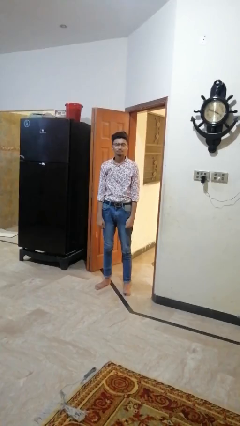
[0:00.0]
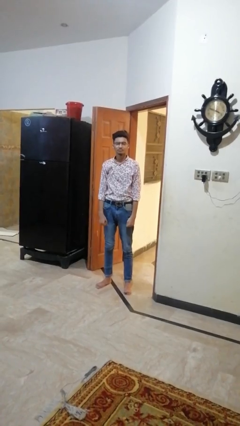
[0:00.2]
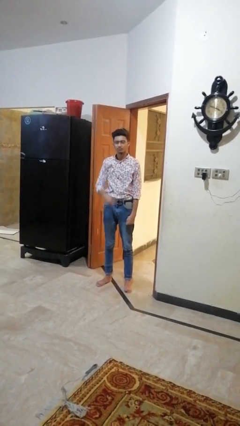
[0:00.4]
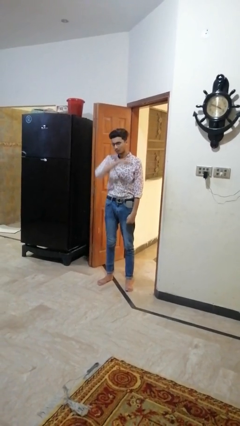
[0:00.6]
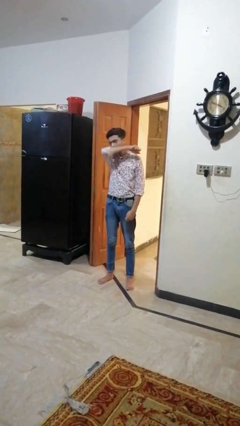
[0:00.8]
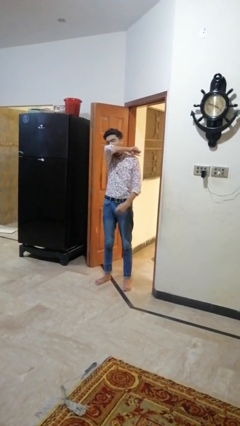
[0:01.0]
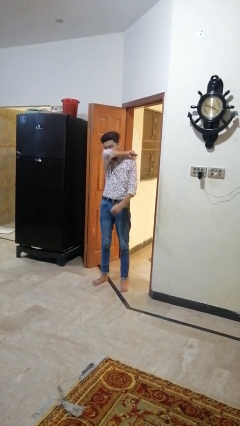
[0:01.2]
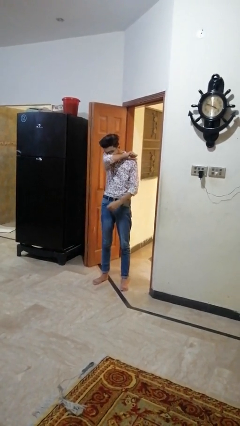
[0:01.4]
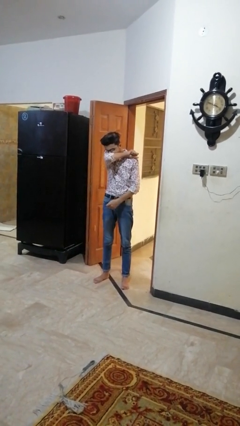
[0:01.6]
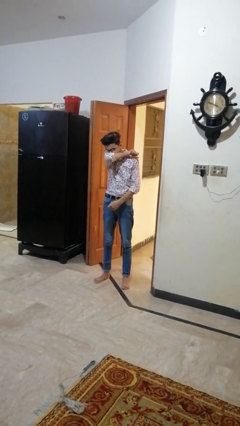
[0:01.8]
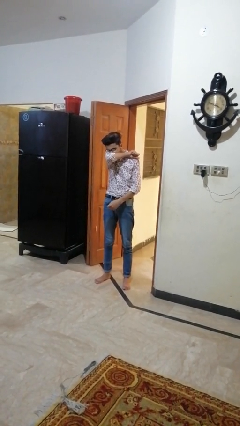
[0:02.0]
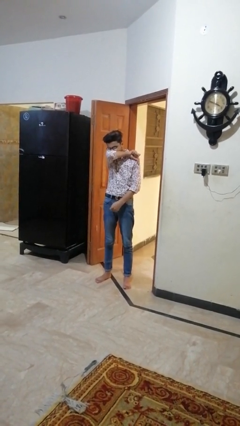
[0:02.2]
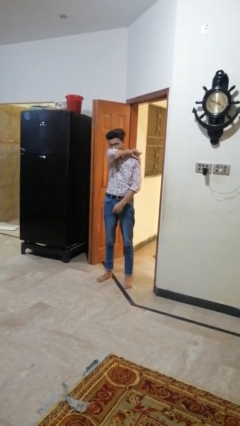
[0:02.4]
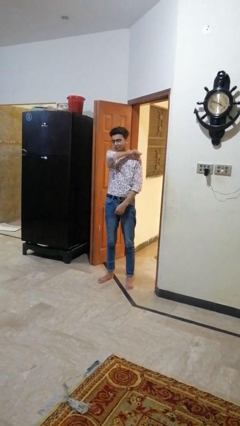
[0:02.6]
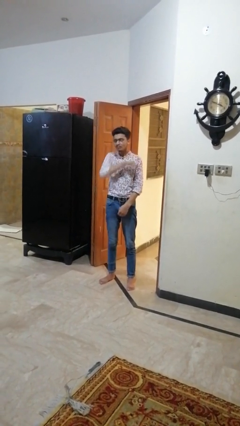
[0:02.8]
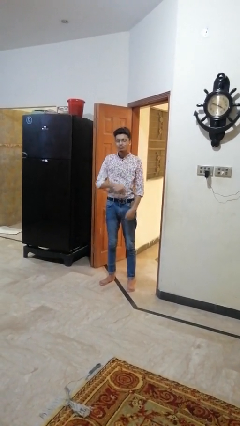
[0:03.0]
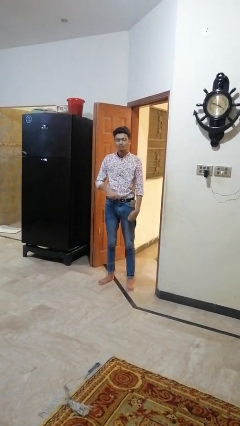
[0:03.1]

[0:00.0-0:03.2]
person sneezes into arm

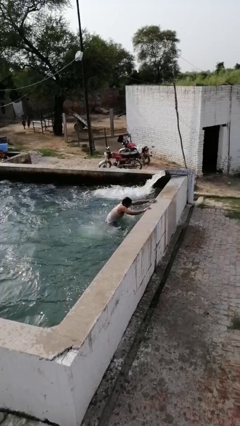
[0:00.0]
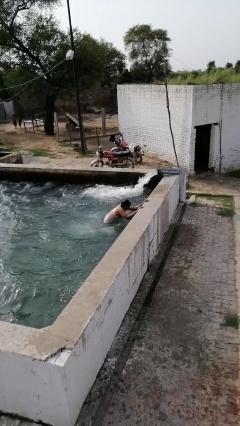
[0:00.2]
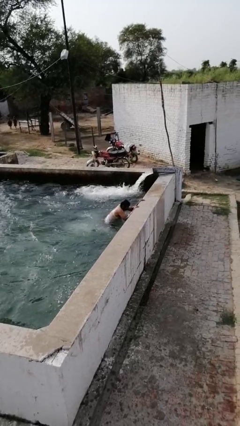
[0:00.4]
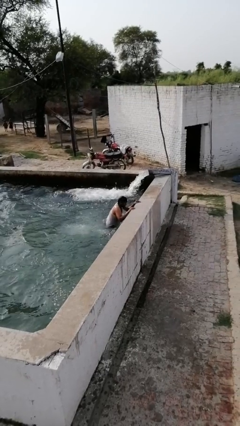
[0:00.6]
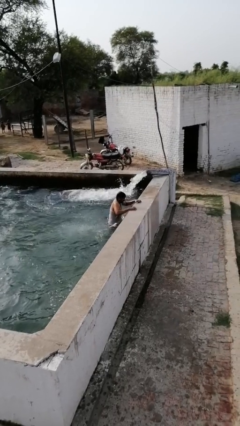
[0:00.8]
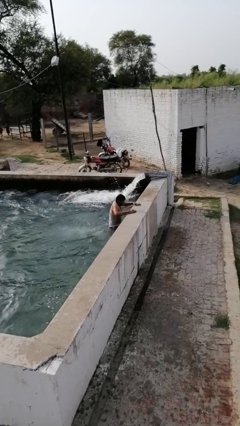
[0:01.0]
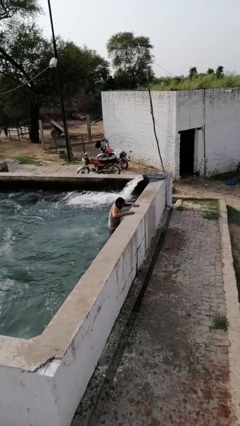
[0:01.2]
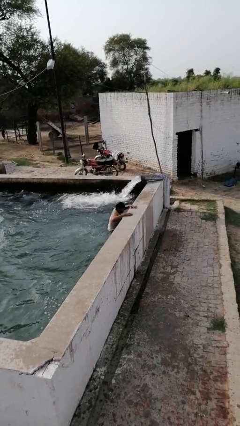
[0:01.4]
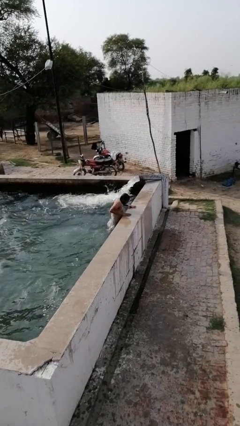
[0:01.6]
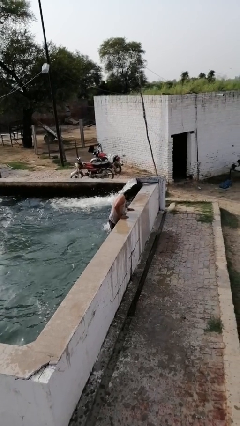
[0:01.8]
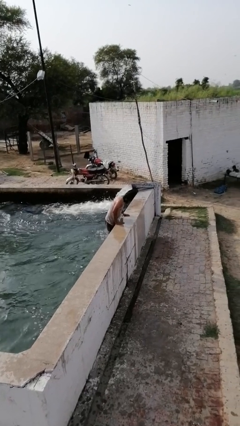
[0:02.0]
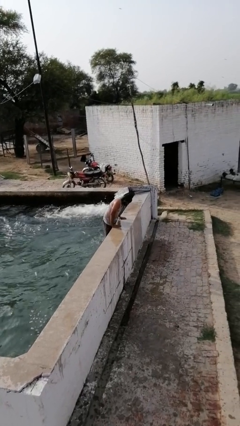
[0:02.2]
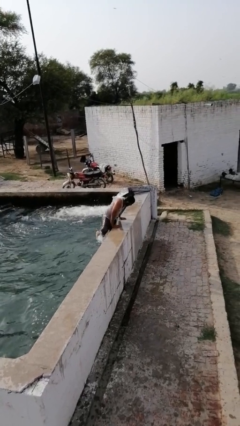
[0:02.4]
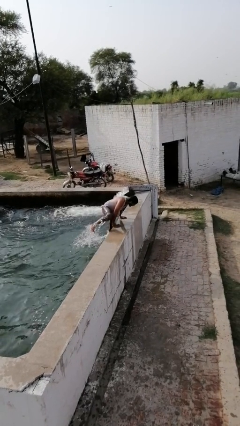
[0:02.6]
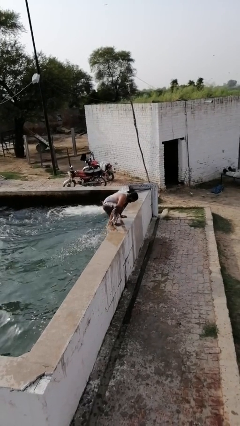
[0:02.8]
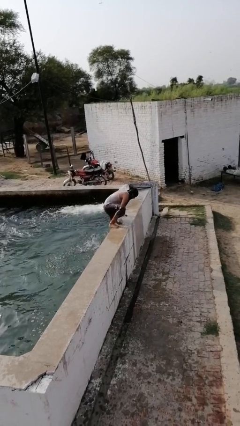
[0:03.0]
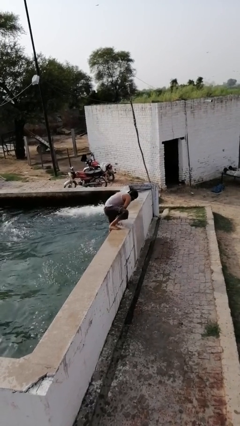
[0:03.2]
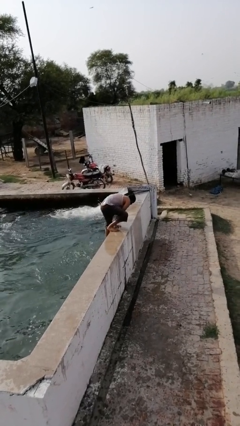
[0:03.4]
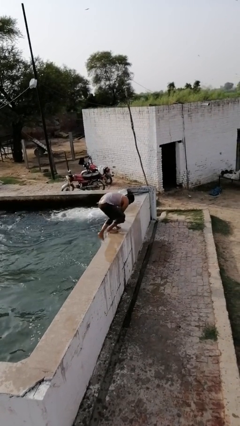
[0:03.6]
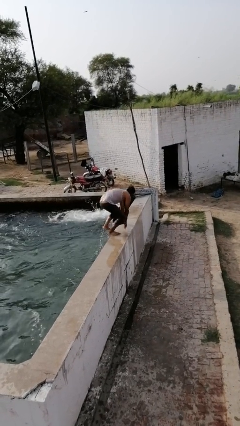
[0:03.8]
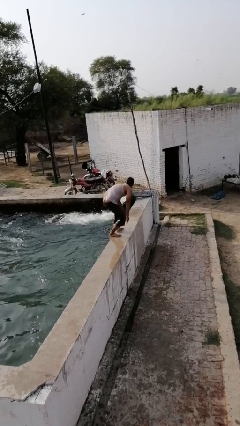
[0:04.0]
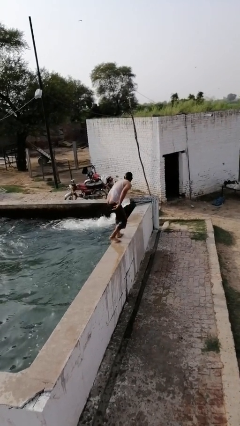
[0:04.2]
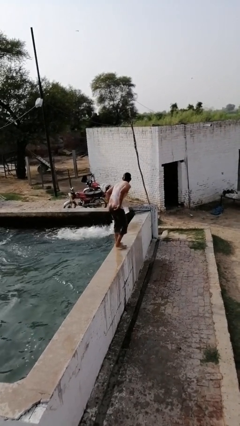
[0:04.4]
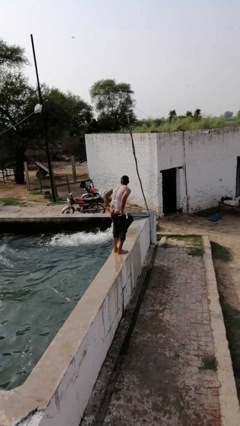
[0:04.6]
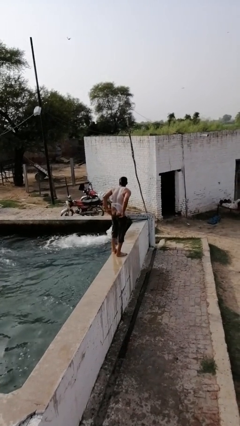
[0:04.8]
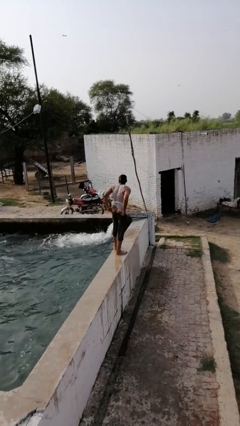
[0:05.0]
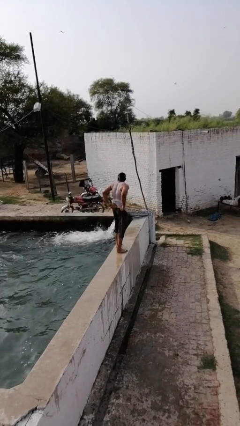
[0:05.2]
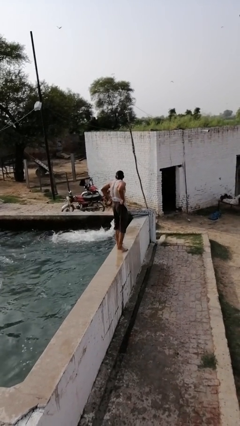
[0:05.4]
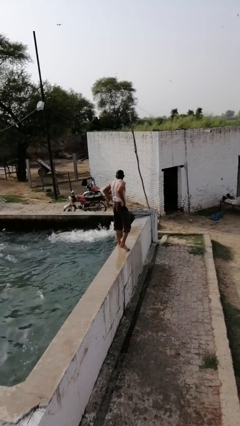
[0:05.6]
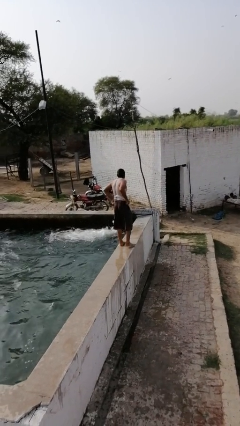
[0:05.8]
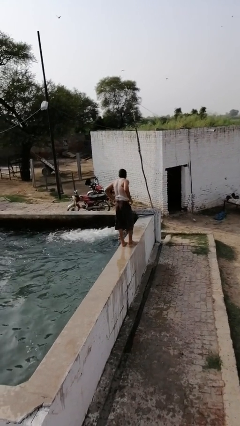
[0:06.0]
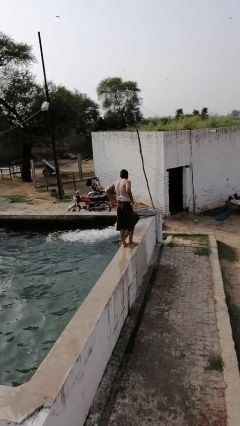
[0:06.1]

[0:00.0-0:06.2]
person exits pool

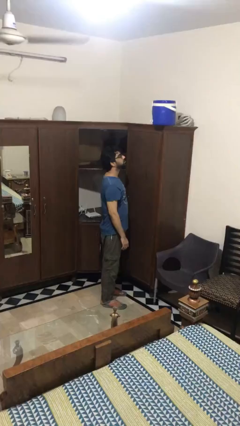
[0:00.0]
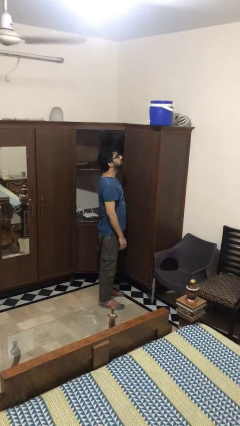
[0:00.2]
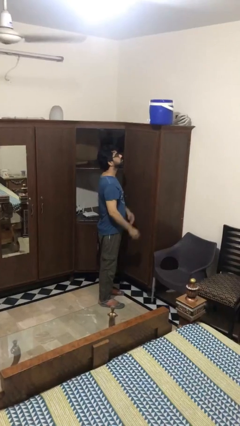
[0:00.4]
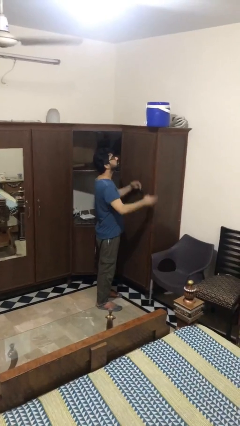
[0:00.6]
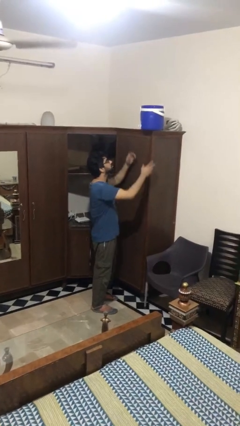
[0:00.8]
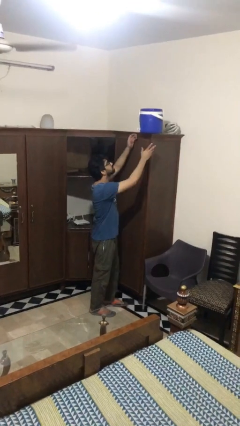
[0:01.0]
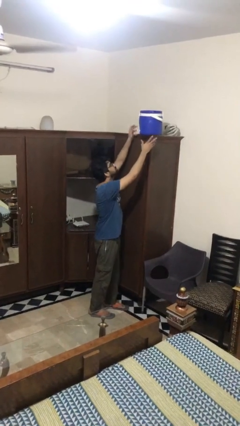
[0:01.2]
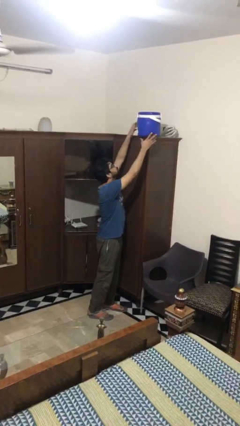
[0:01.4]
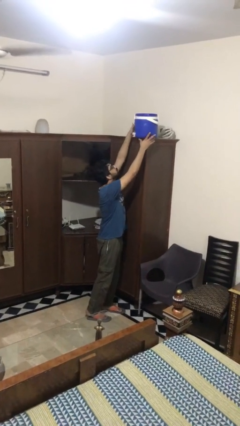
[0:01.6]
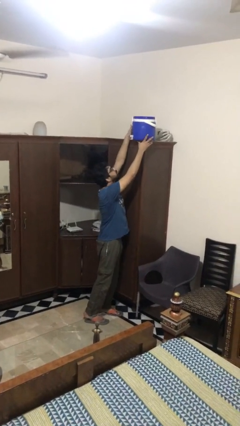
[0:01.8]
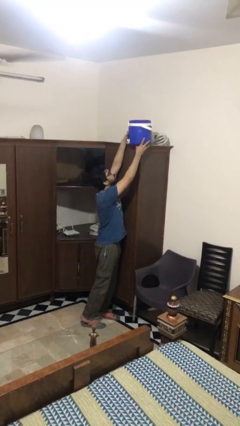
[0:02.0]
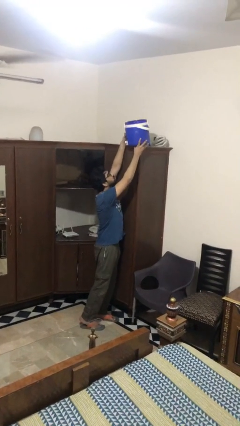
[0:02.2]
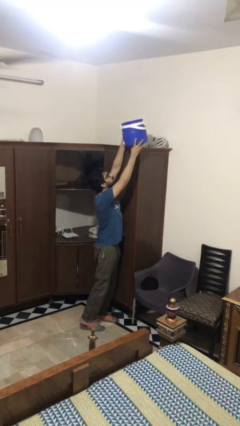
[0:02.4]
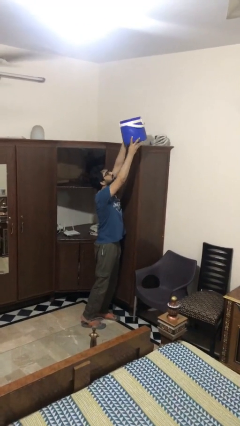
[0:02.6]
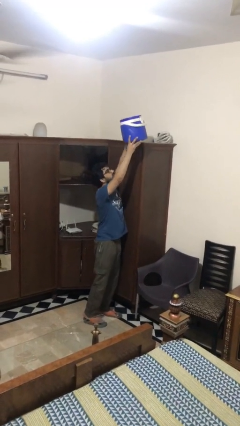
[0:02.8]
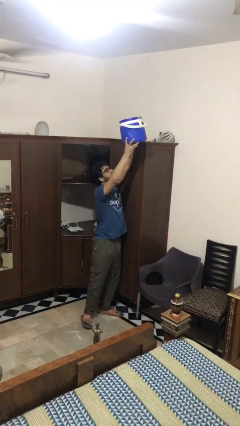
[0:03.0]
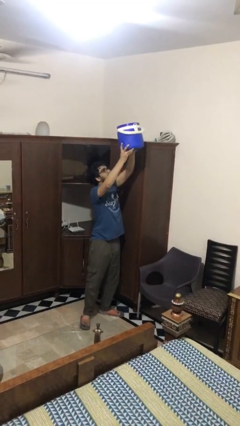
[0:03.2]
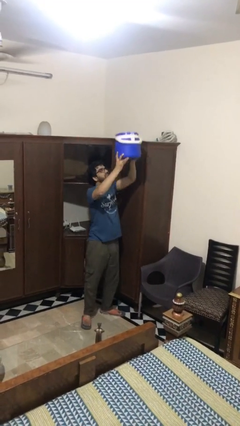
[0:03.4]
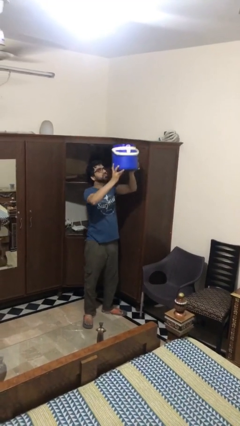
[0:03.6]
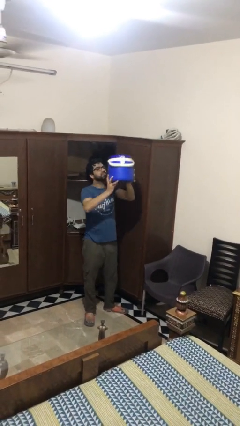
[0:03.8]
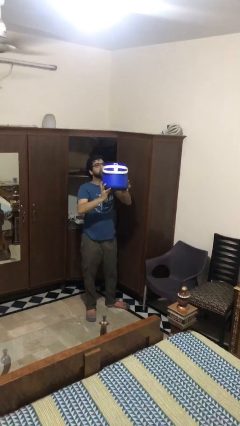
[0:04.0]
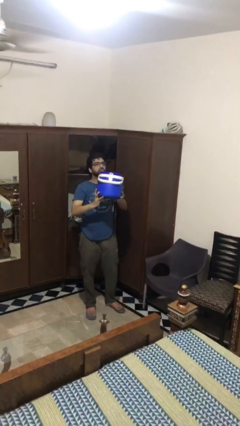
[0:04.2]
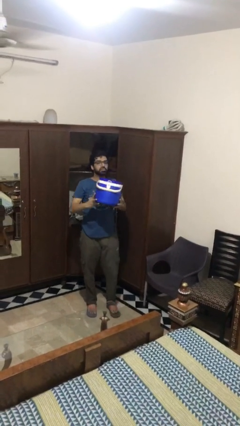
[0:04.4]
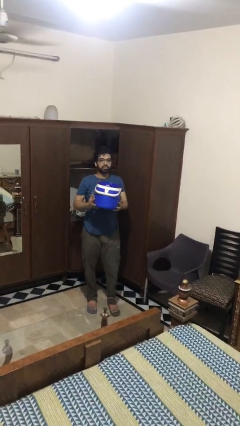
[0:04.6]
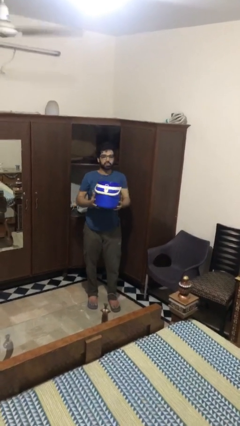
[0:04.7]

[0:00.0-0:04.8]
person picks up object from shelf

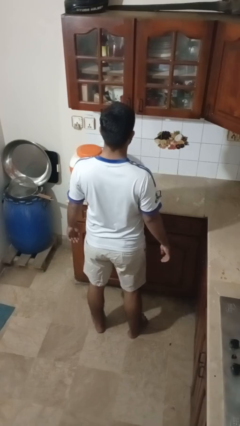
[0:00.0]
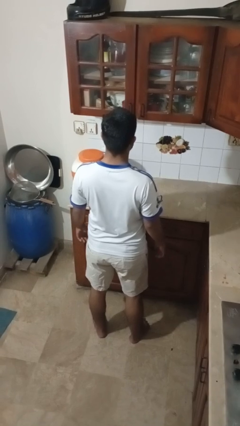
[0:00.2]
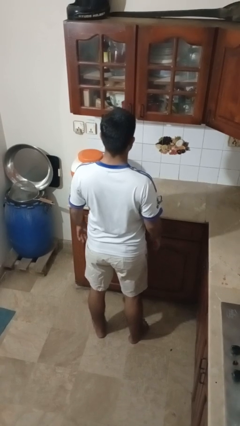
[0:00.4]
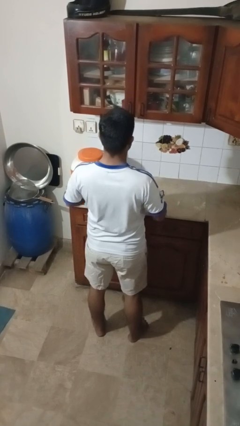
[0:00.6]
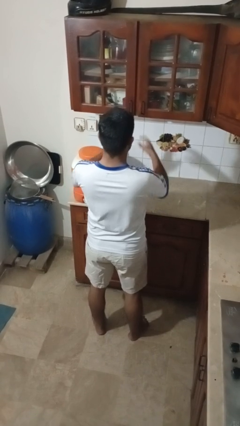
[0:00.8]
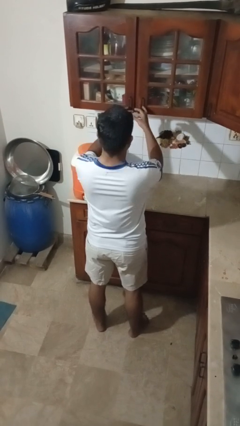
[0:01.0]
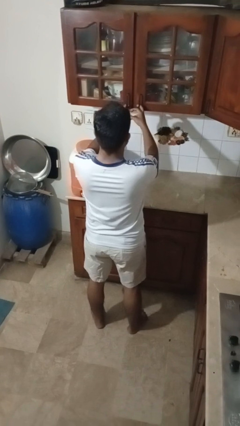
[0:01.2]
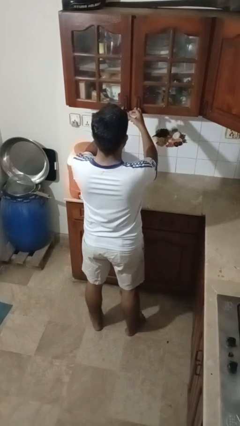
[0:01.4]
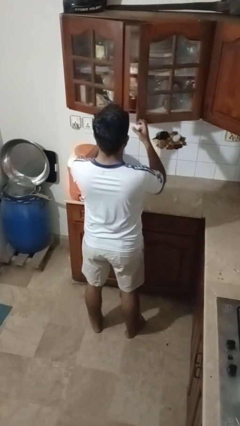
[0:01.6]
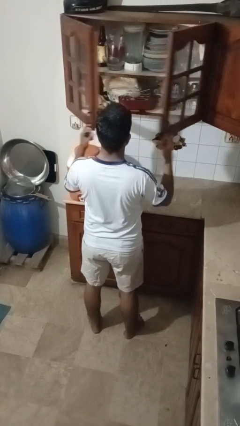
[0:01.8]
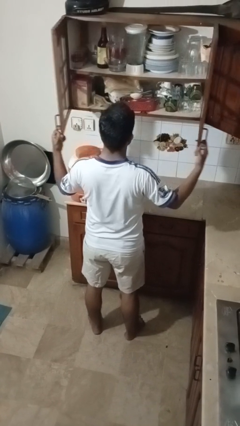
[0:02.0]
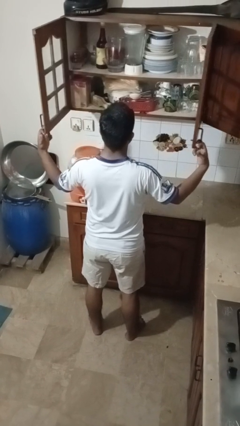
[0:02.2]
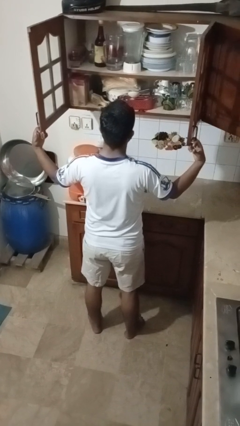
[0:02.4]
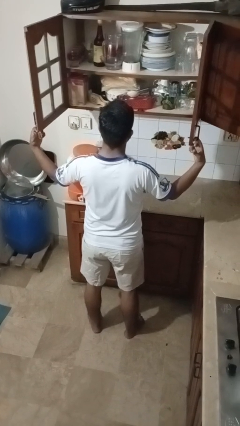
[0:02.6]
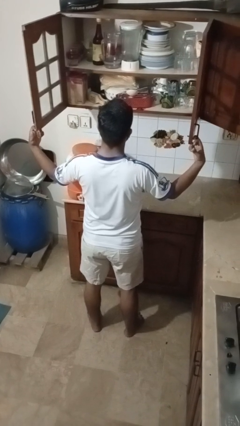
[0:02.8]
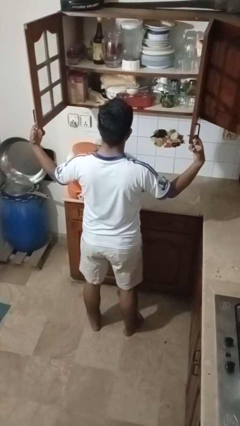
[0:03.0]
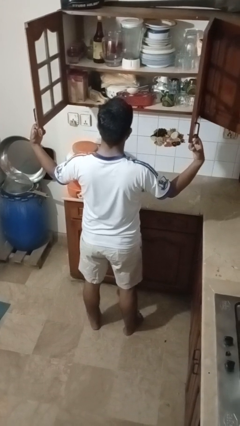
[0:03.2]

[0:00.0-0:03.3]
person opens cabinet

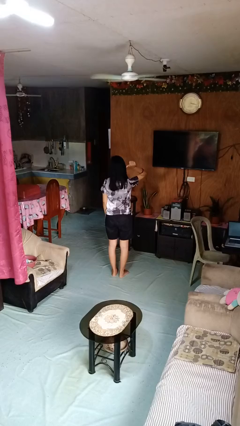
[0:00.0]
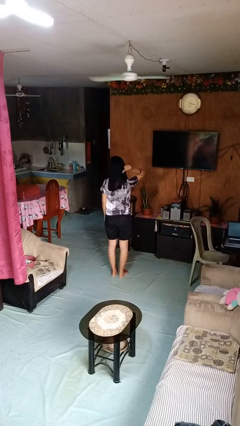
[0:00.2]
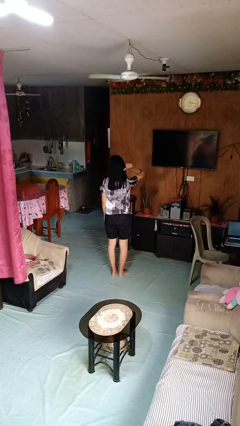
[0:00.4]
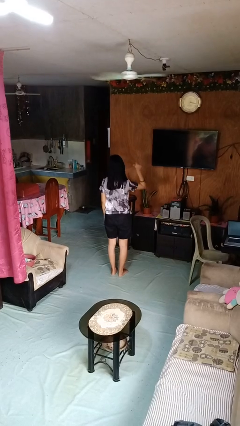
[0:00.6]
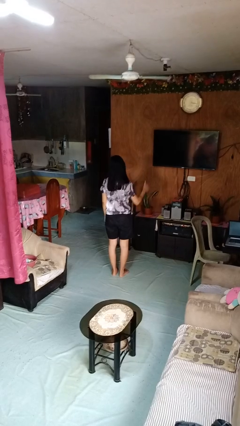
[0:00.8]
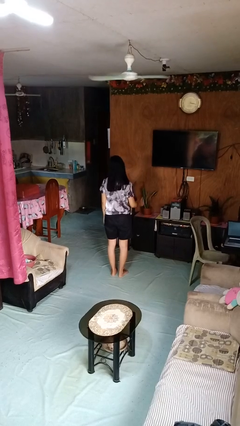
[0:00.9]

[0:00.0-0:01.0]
person gestures behind me
